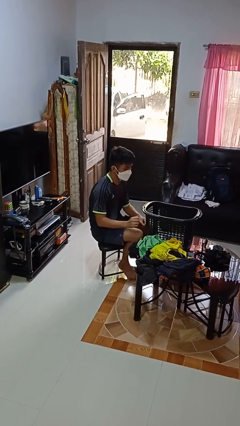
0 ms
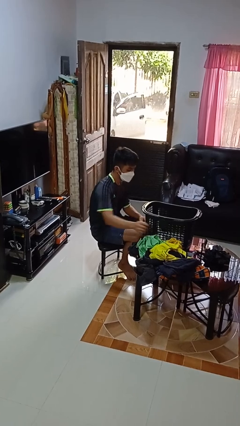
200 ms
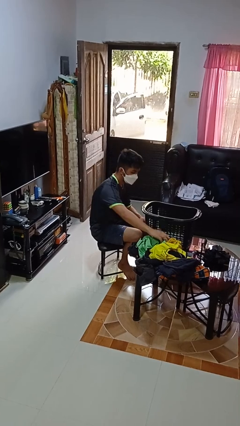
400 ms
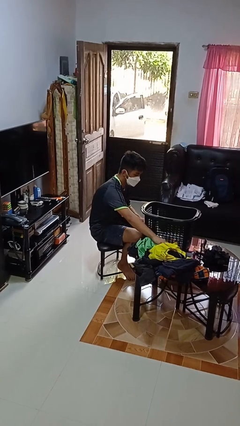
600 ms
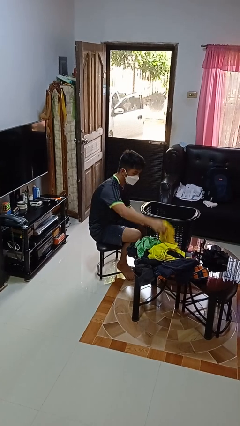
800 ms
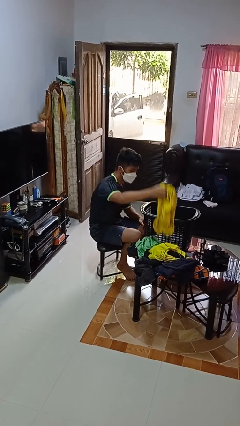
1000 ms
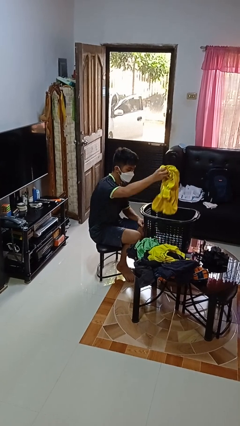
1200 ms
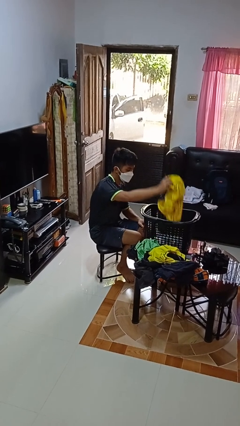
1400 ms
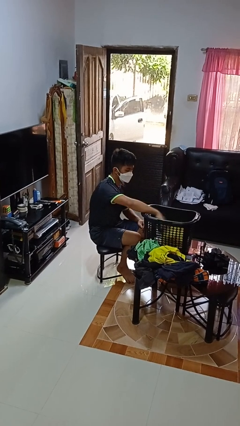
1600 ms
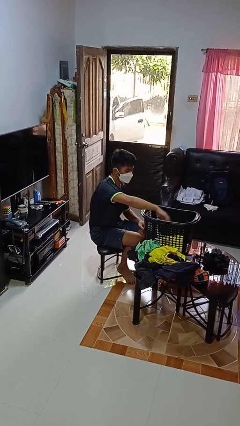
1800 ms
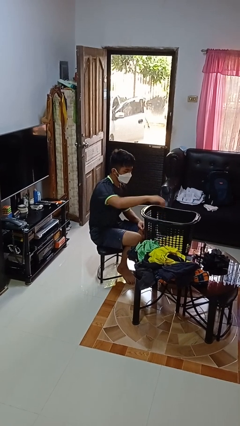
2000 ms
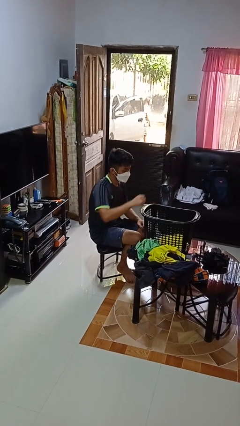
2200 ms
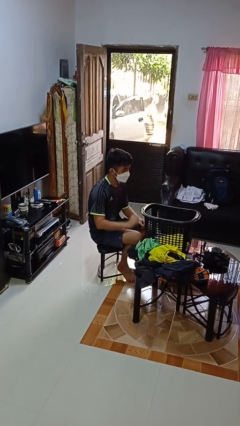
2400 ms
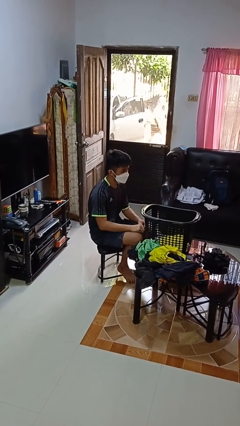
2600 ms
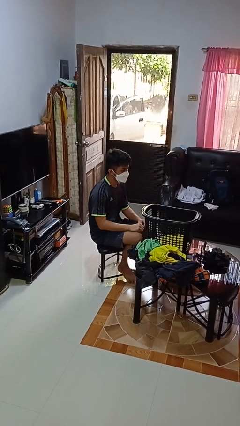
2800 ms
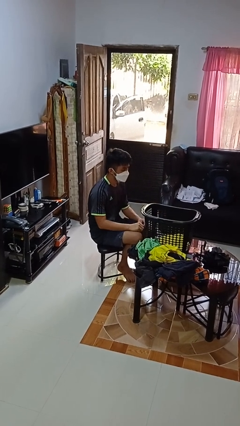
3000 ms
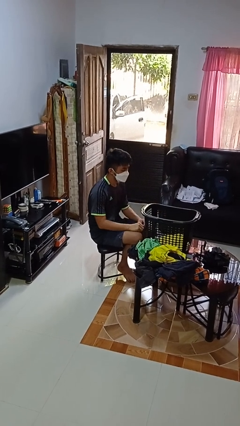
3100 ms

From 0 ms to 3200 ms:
person puts object into basket

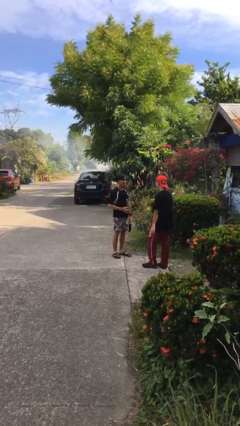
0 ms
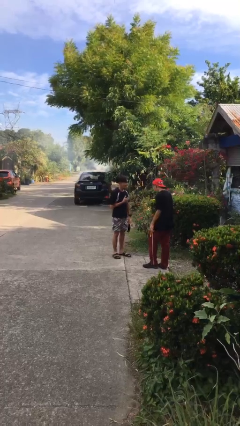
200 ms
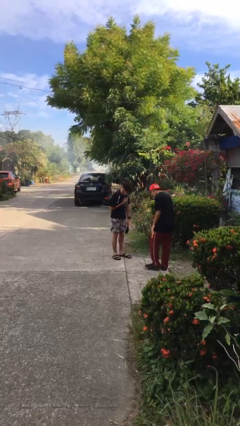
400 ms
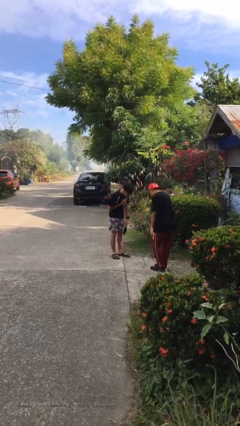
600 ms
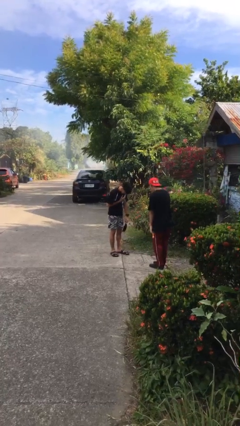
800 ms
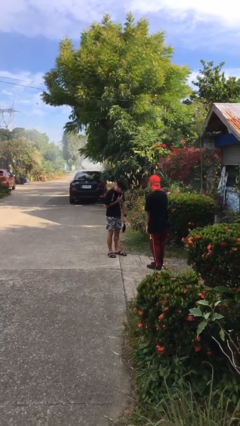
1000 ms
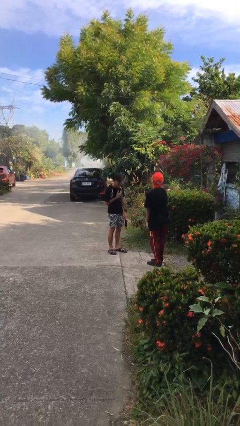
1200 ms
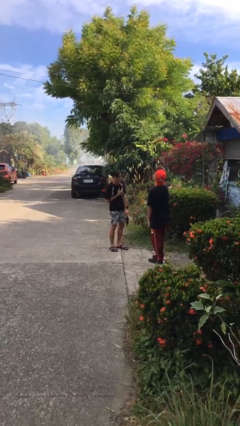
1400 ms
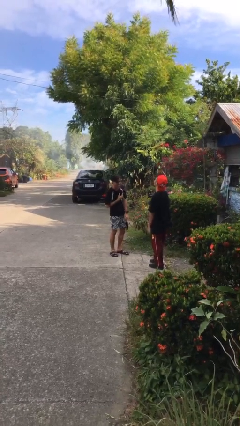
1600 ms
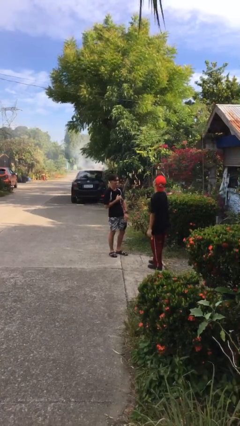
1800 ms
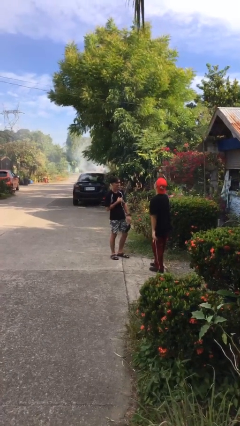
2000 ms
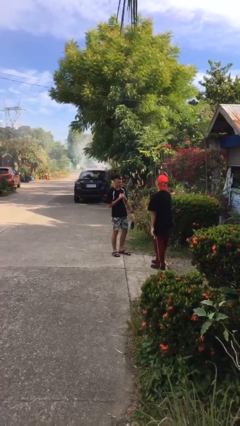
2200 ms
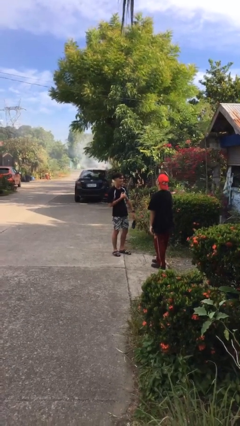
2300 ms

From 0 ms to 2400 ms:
person laughs with person

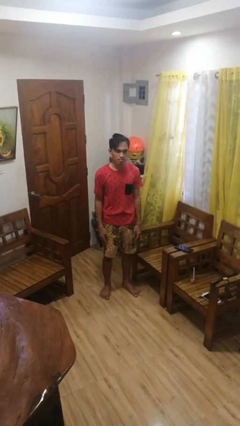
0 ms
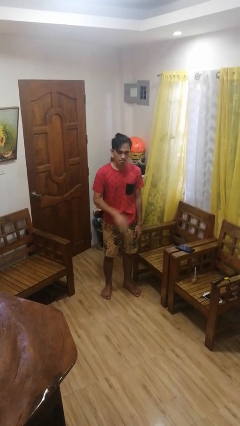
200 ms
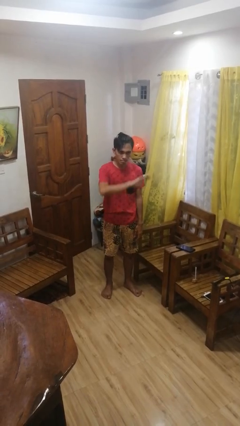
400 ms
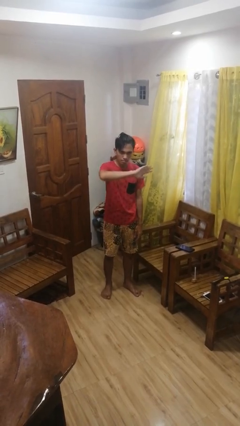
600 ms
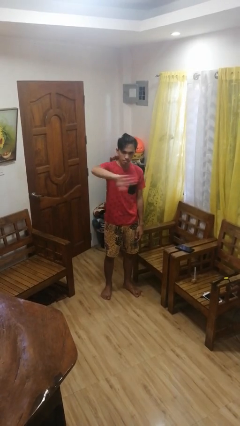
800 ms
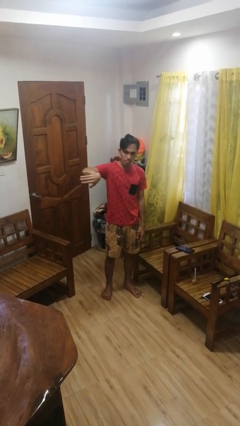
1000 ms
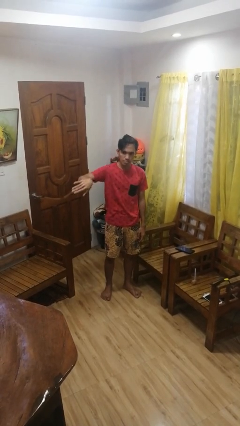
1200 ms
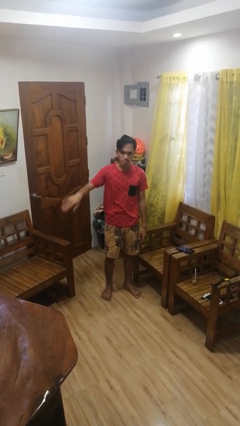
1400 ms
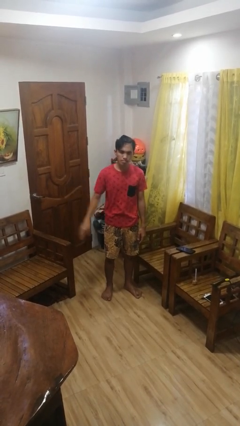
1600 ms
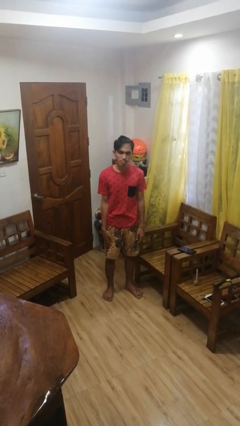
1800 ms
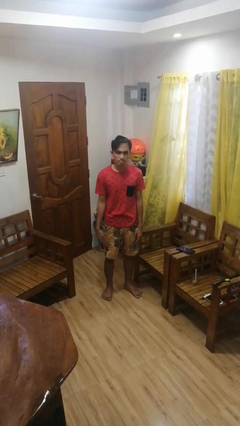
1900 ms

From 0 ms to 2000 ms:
person gestures swipe right

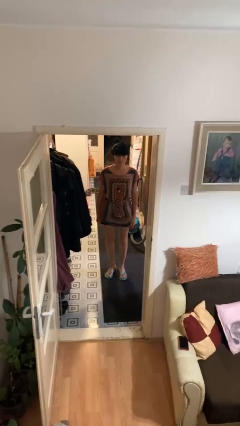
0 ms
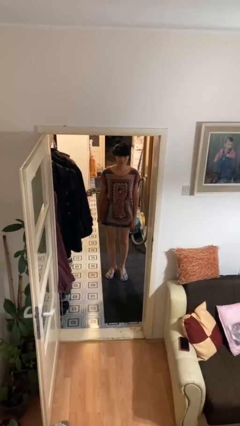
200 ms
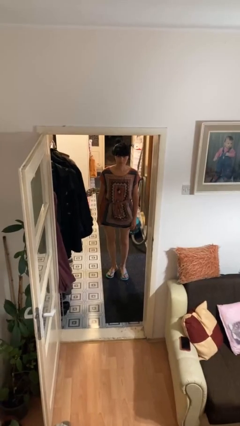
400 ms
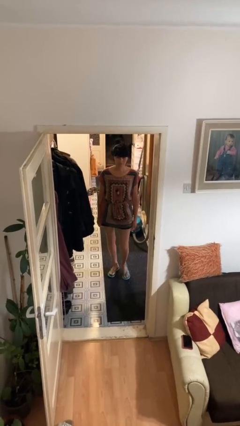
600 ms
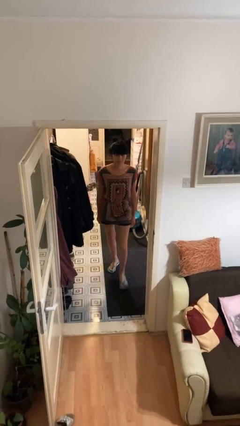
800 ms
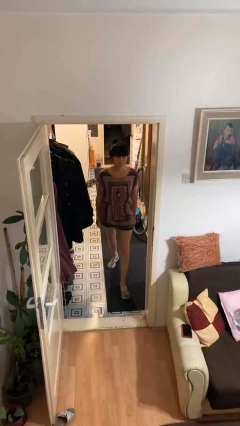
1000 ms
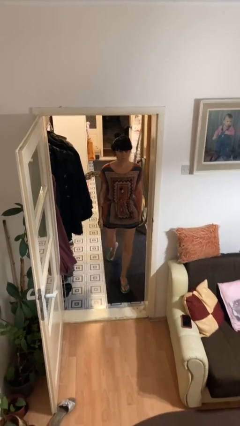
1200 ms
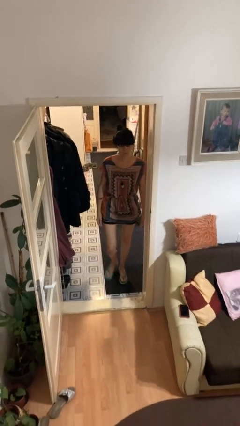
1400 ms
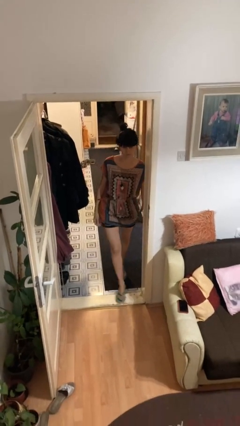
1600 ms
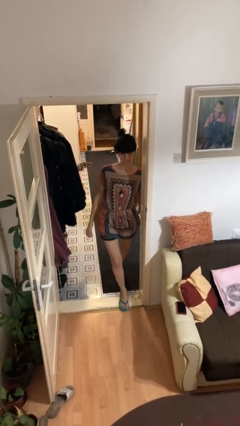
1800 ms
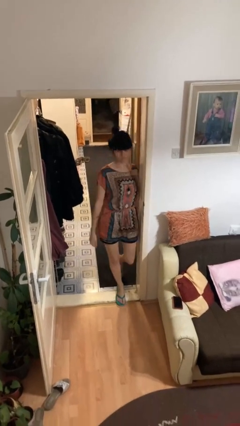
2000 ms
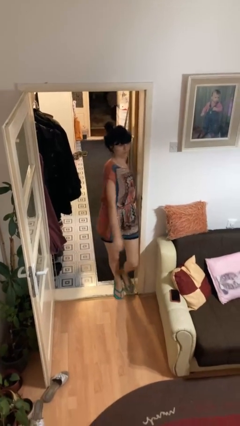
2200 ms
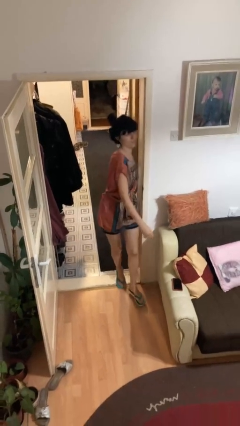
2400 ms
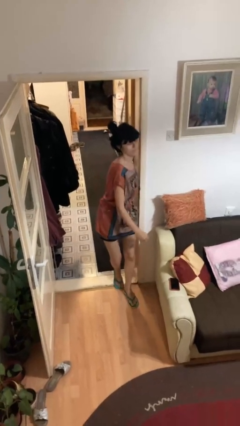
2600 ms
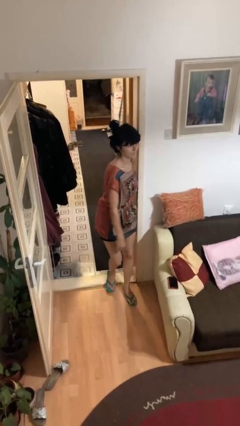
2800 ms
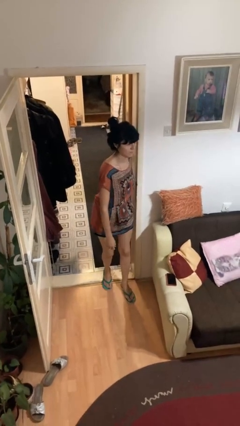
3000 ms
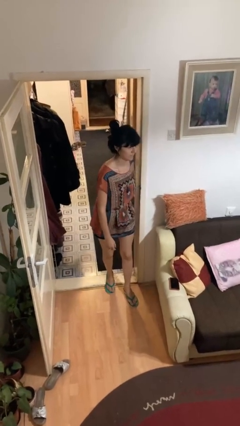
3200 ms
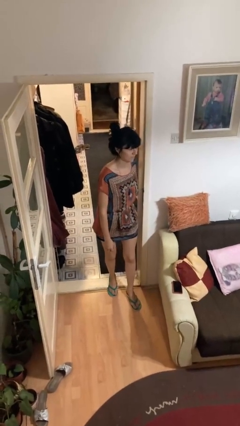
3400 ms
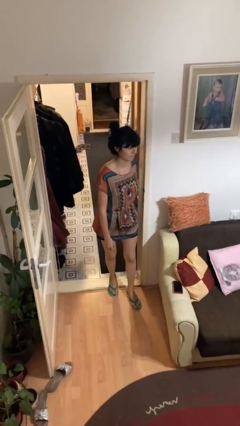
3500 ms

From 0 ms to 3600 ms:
person bumps into wall

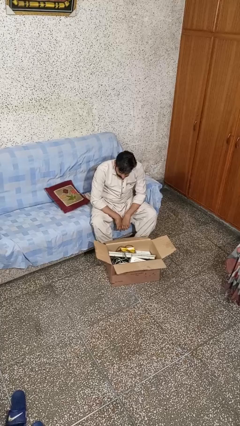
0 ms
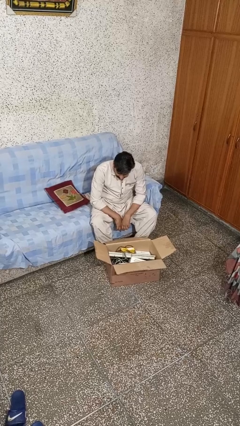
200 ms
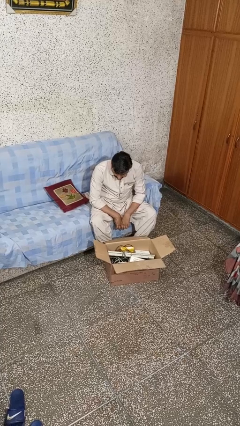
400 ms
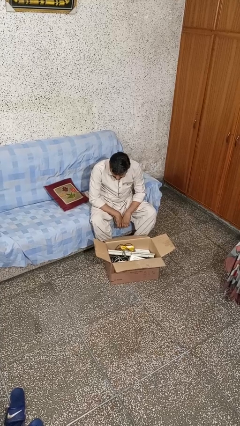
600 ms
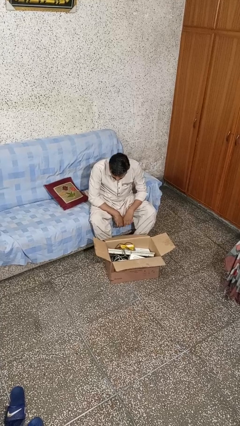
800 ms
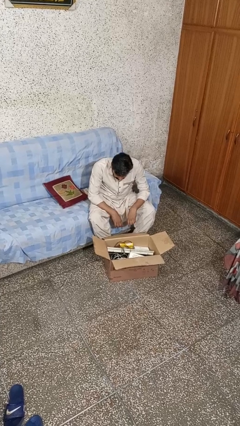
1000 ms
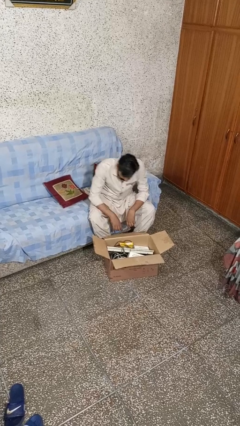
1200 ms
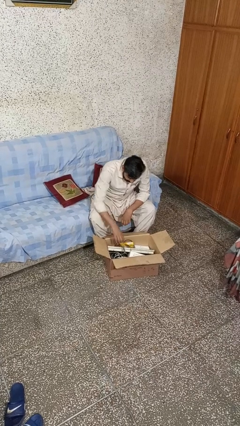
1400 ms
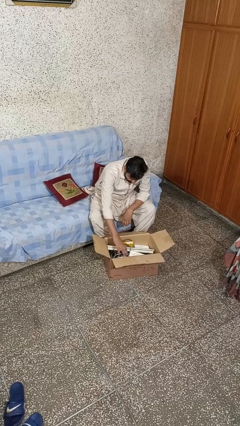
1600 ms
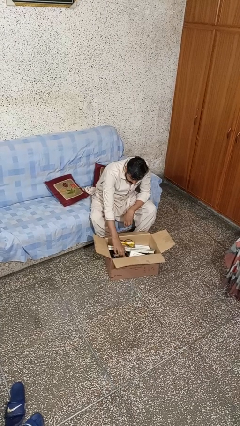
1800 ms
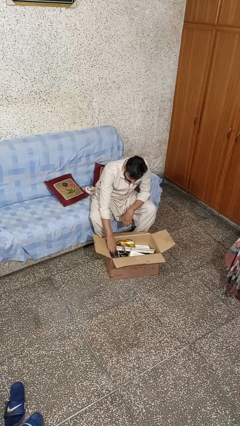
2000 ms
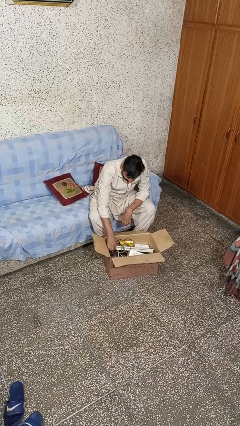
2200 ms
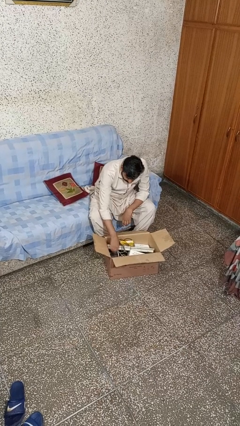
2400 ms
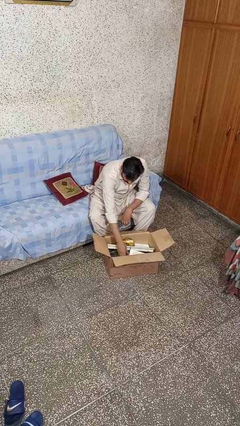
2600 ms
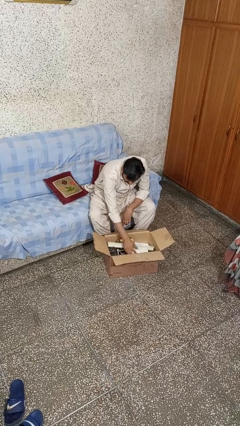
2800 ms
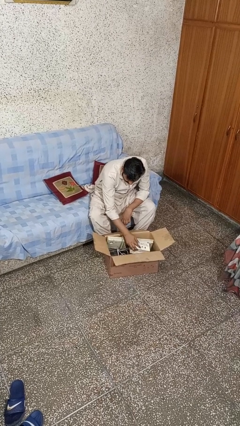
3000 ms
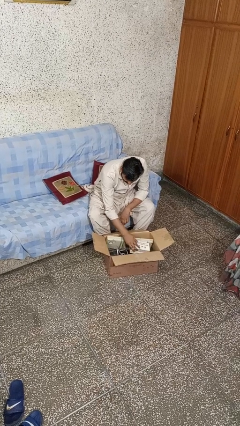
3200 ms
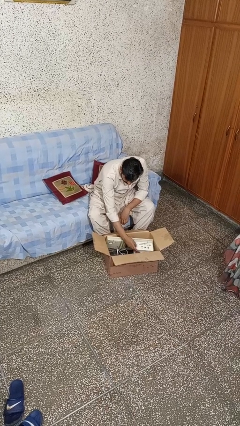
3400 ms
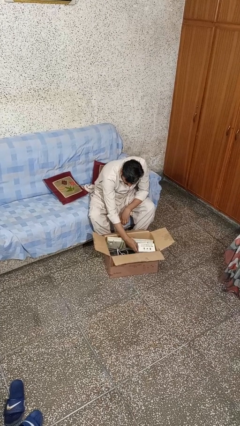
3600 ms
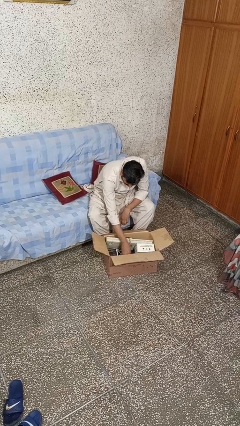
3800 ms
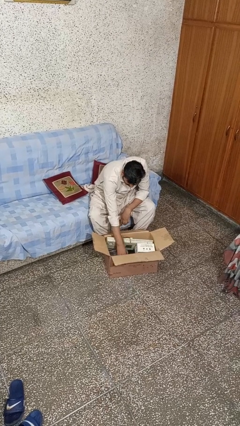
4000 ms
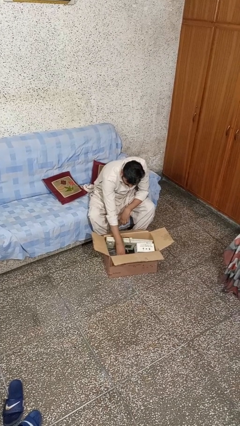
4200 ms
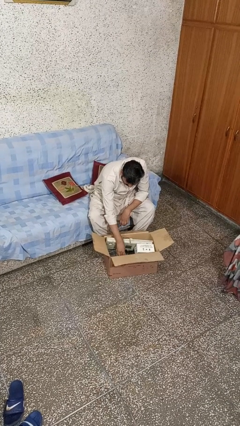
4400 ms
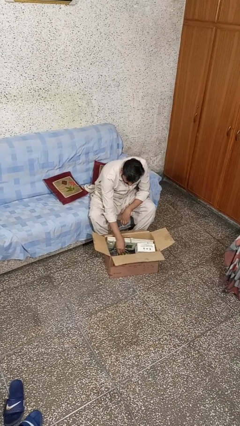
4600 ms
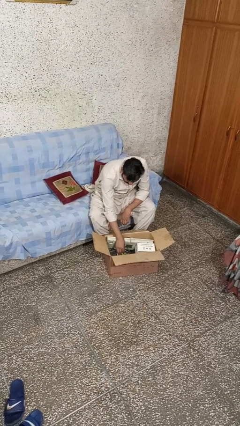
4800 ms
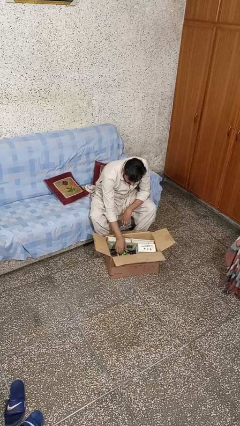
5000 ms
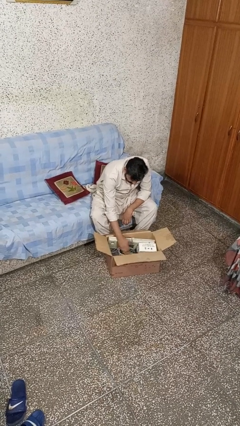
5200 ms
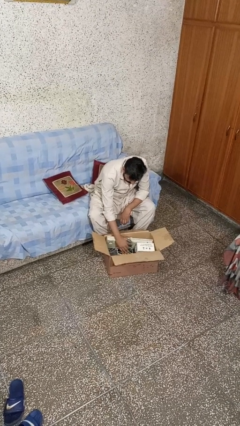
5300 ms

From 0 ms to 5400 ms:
person searches in box

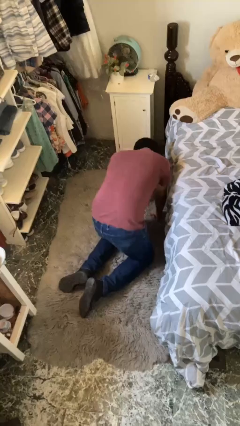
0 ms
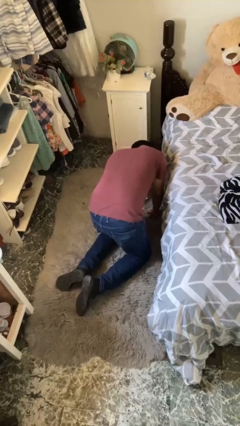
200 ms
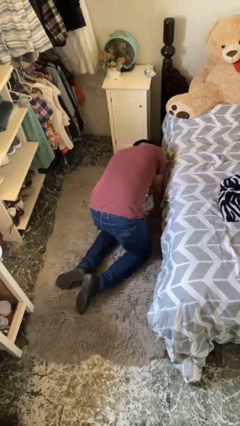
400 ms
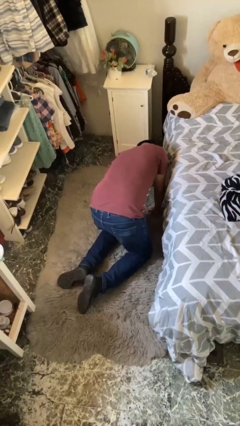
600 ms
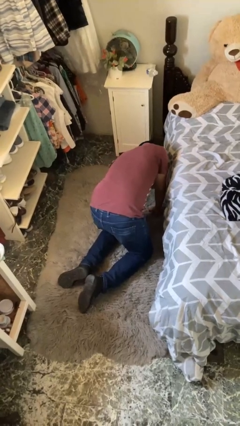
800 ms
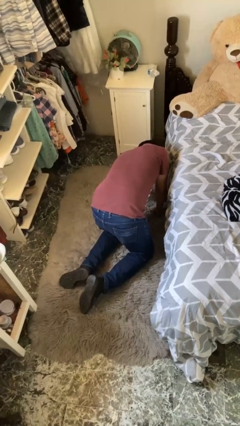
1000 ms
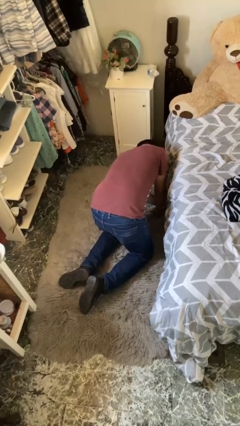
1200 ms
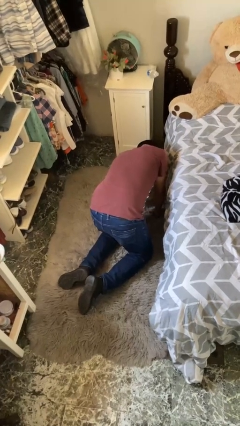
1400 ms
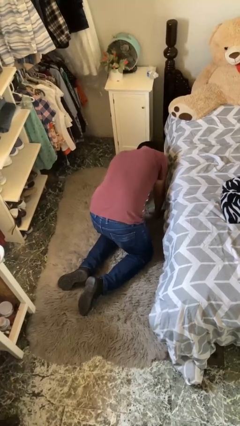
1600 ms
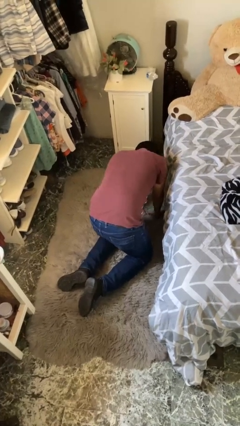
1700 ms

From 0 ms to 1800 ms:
person searches under bed
